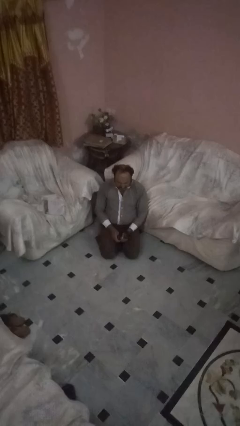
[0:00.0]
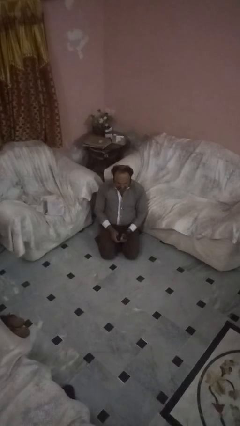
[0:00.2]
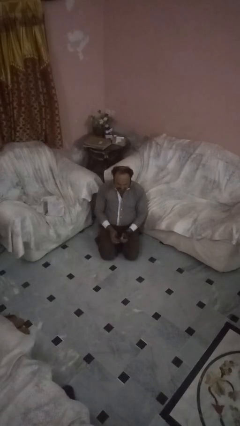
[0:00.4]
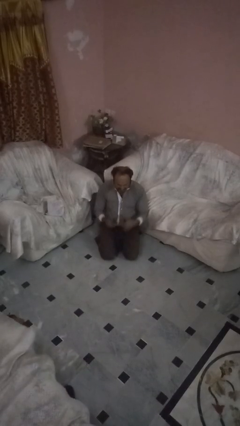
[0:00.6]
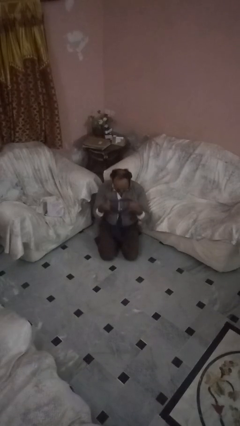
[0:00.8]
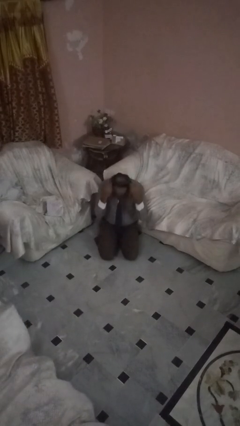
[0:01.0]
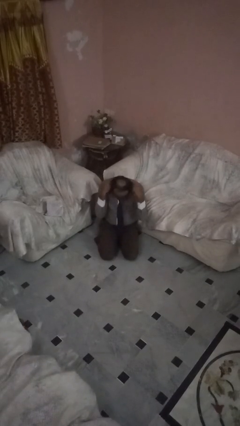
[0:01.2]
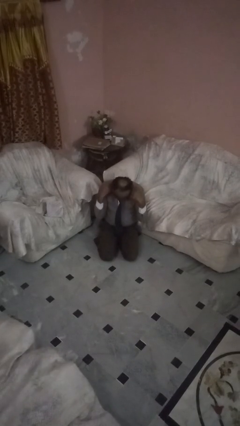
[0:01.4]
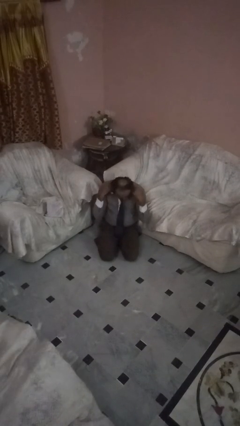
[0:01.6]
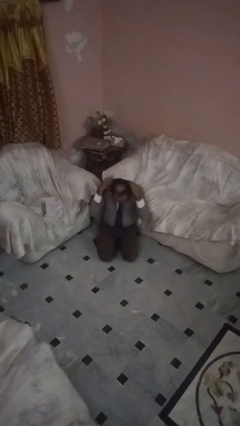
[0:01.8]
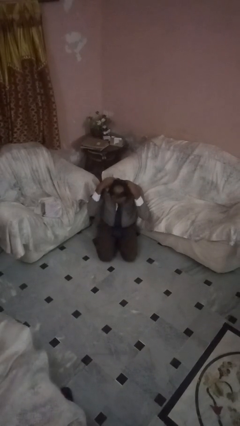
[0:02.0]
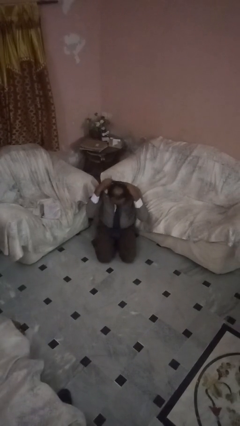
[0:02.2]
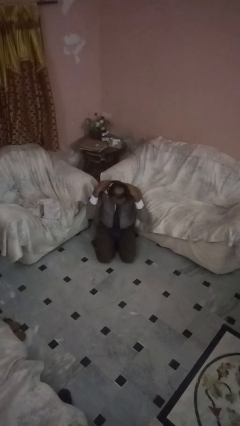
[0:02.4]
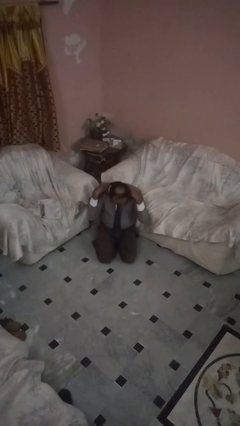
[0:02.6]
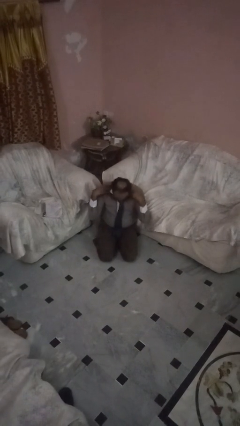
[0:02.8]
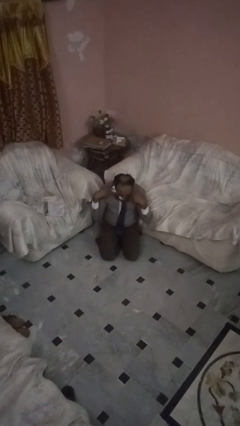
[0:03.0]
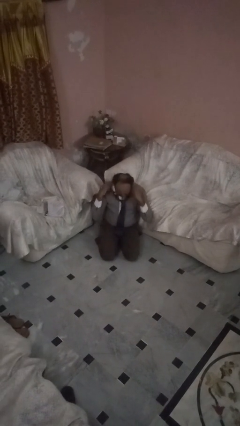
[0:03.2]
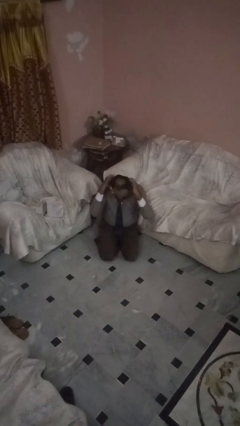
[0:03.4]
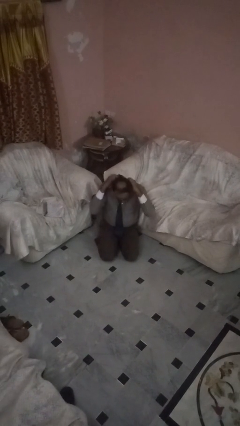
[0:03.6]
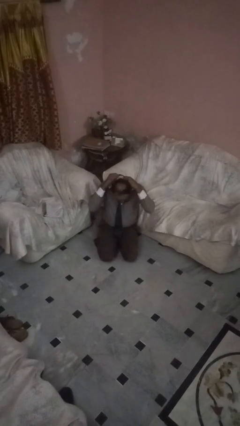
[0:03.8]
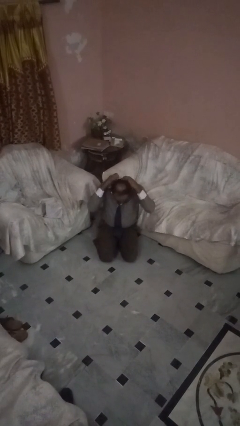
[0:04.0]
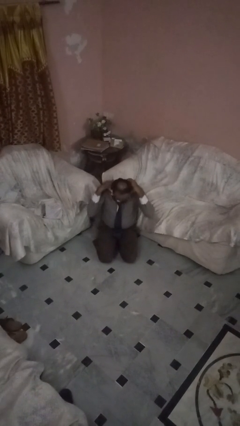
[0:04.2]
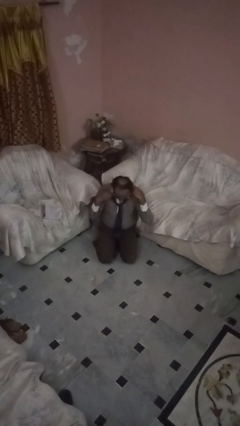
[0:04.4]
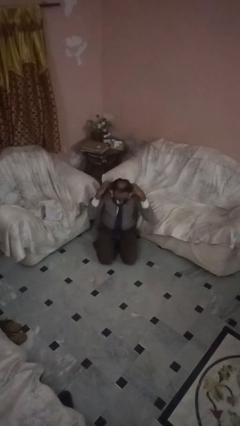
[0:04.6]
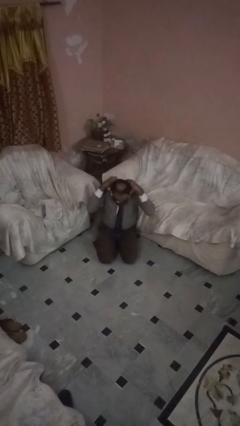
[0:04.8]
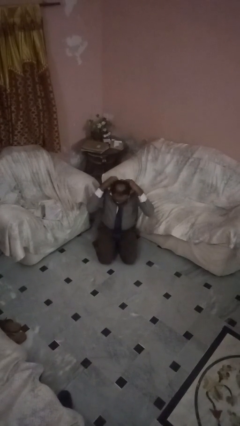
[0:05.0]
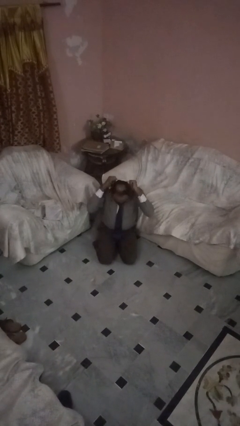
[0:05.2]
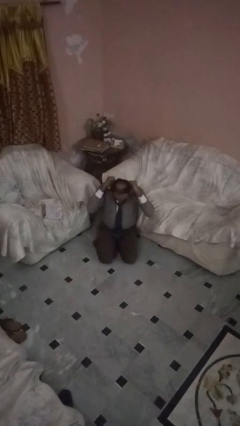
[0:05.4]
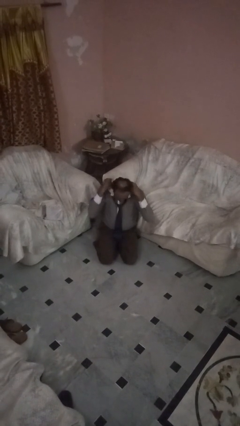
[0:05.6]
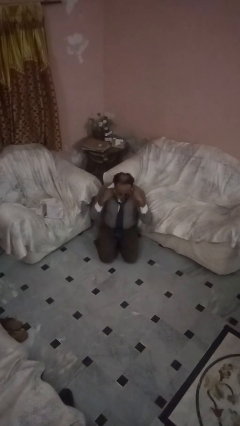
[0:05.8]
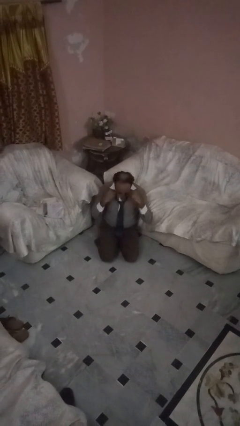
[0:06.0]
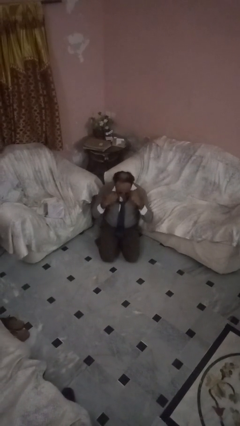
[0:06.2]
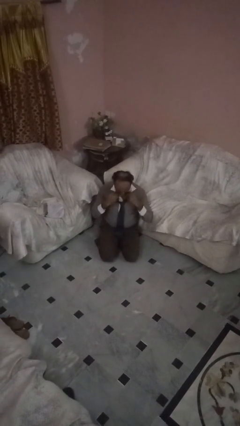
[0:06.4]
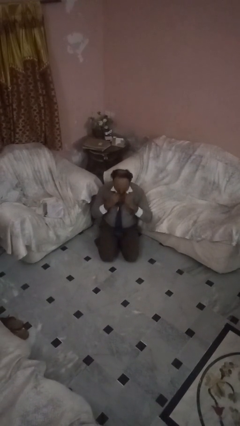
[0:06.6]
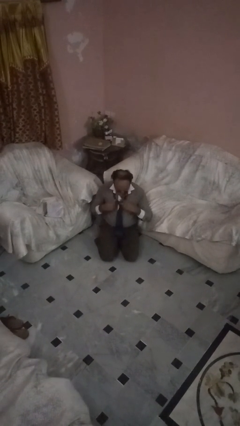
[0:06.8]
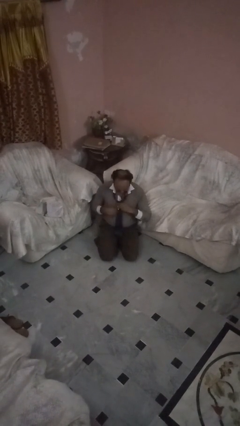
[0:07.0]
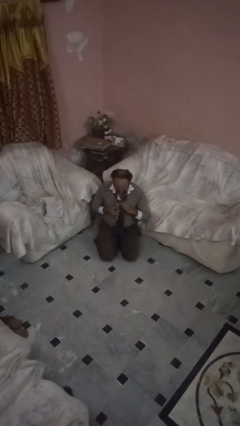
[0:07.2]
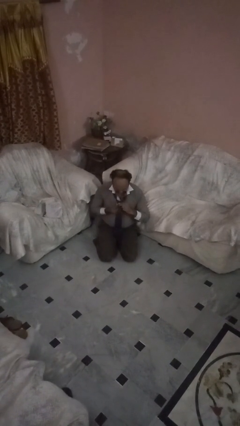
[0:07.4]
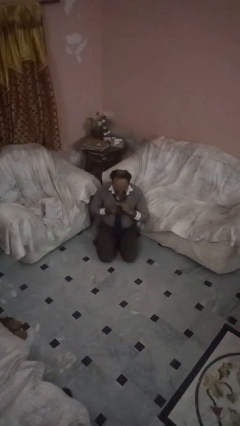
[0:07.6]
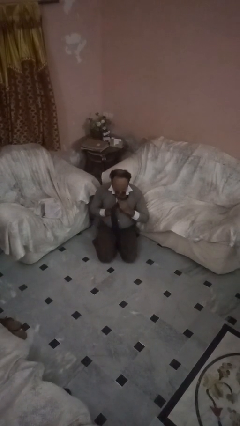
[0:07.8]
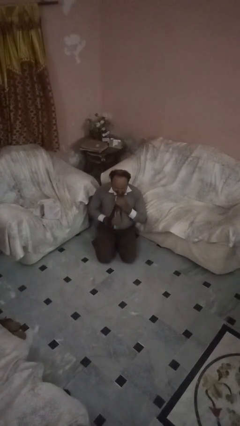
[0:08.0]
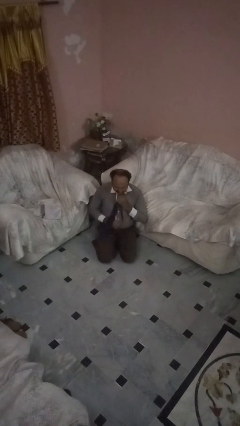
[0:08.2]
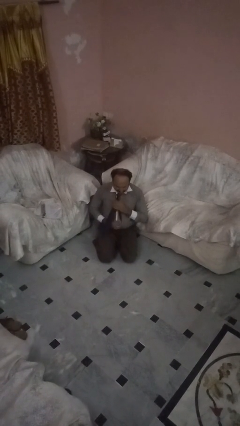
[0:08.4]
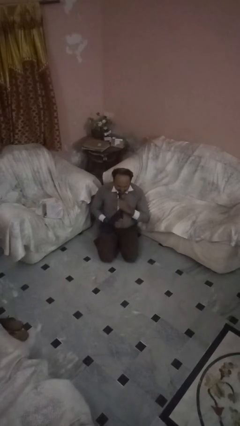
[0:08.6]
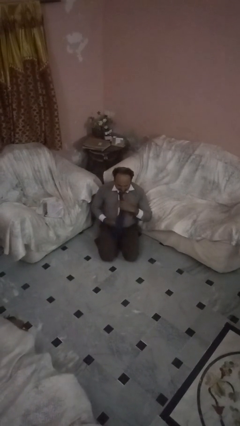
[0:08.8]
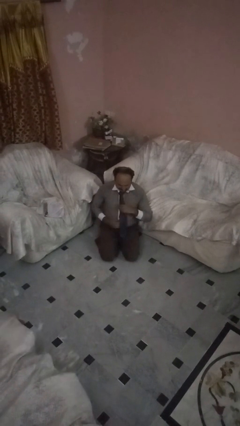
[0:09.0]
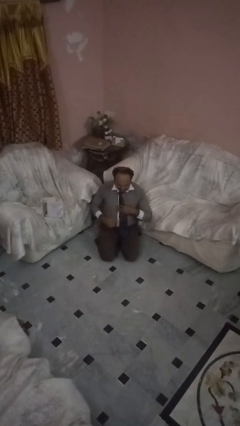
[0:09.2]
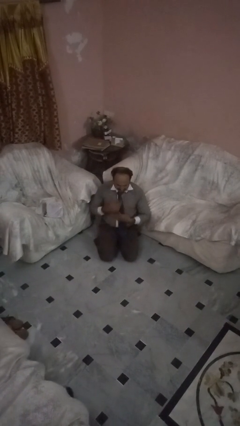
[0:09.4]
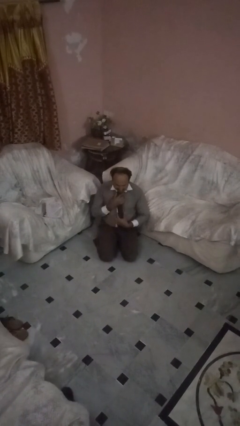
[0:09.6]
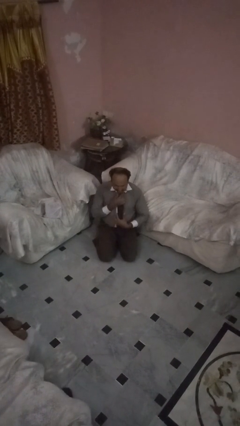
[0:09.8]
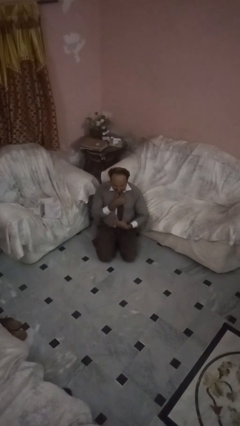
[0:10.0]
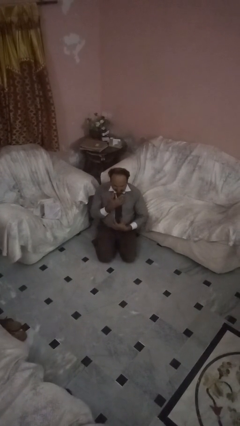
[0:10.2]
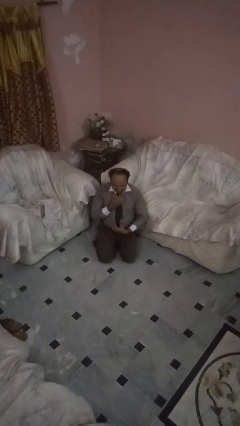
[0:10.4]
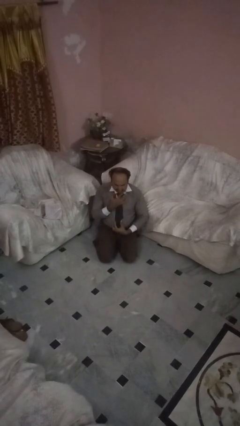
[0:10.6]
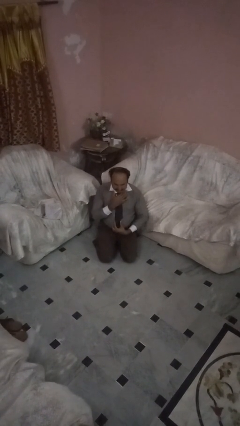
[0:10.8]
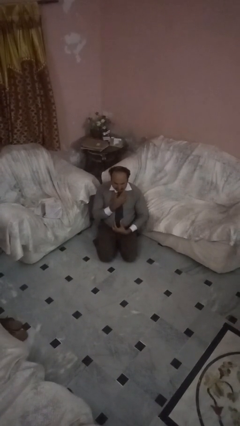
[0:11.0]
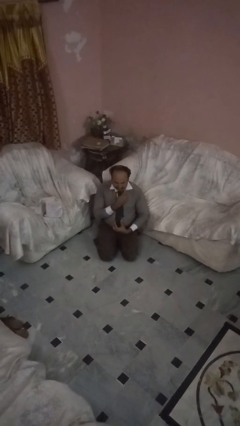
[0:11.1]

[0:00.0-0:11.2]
person puts on necktie

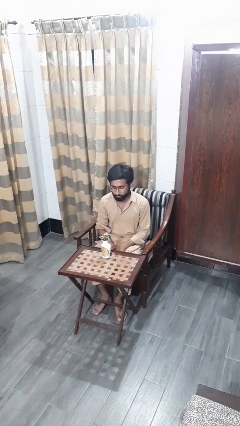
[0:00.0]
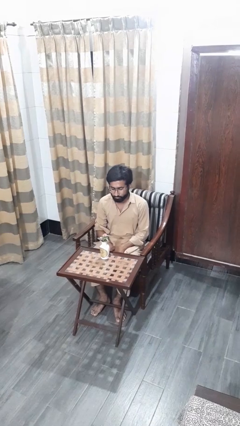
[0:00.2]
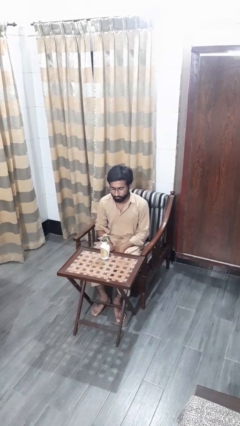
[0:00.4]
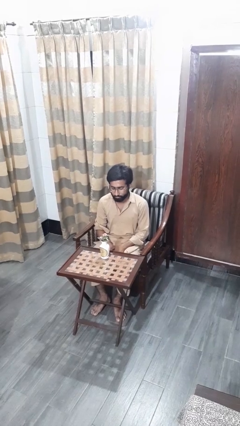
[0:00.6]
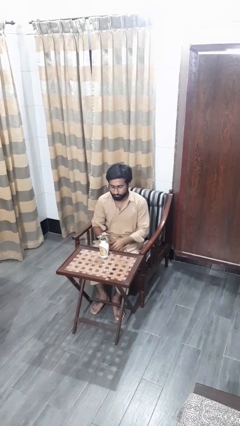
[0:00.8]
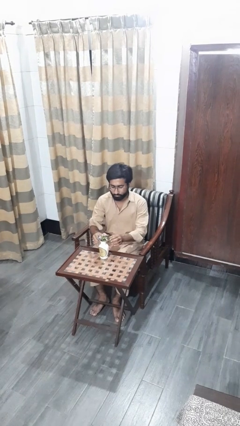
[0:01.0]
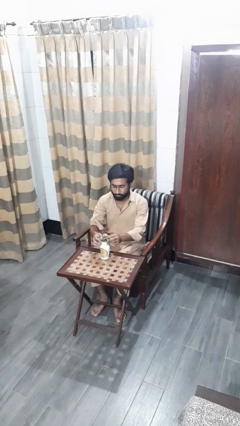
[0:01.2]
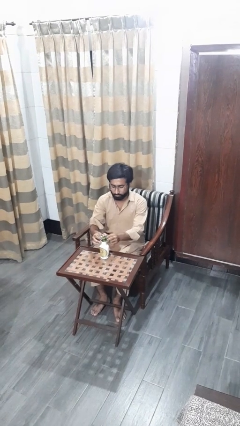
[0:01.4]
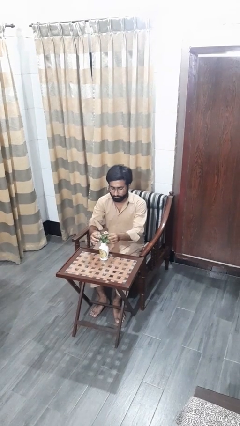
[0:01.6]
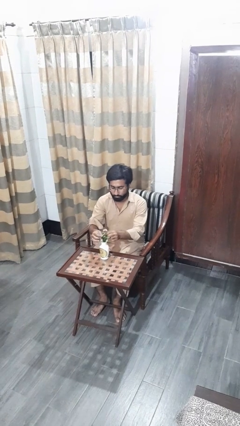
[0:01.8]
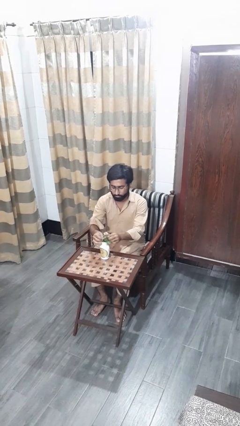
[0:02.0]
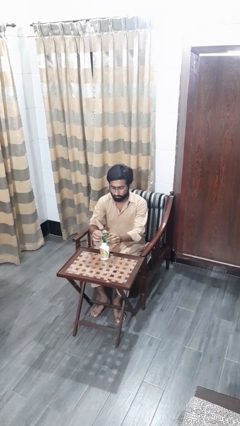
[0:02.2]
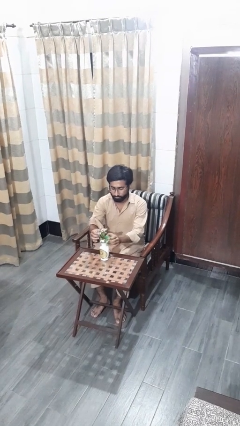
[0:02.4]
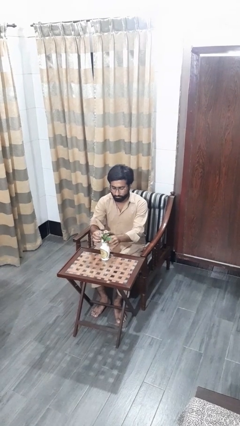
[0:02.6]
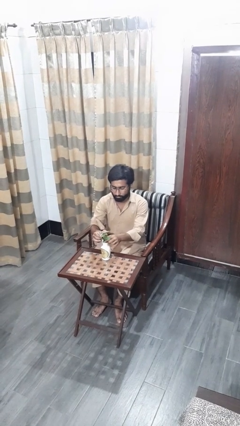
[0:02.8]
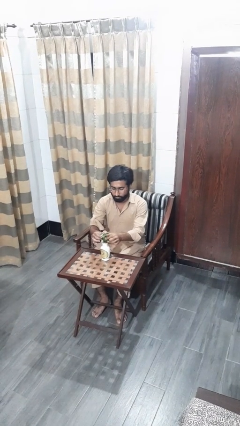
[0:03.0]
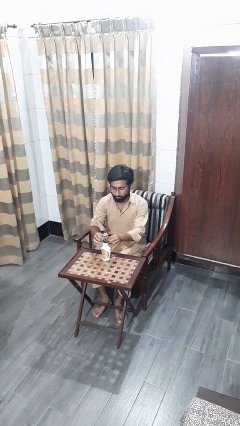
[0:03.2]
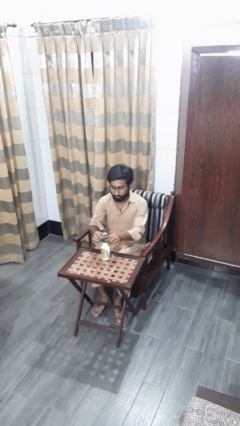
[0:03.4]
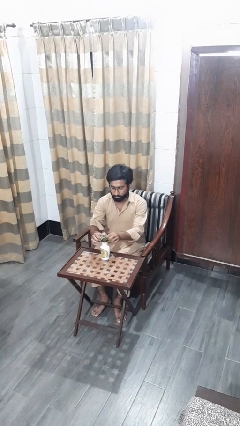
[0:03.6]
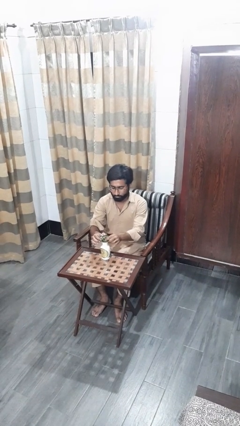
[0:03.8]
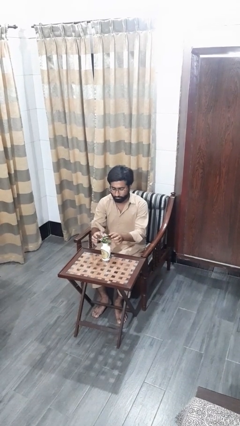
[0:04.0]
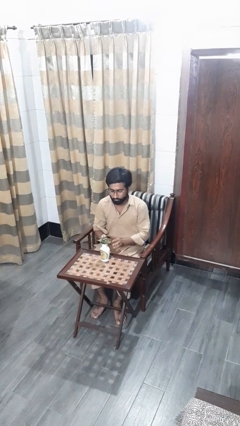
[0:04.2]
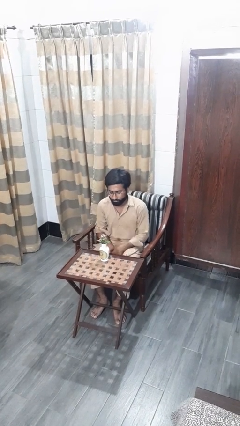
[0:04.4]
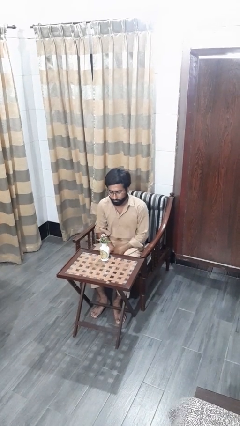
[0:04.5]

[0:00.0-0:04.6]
person arranges flowers in vase

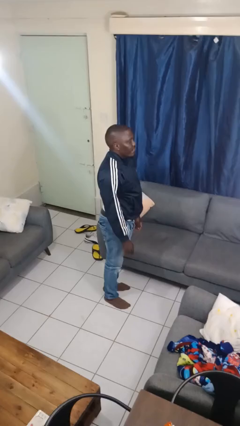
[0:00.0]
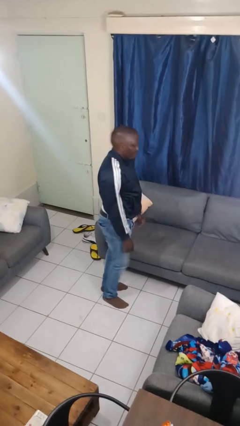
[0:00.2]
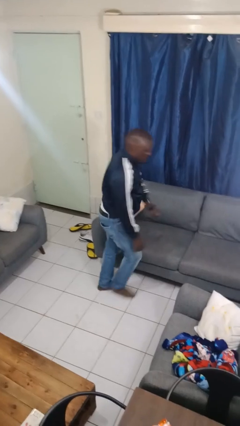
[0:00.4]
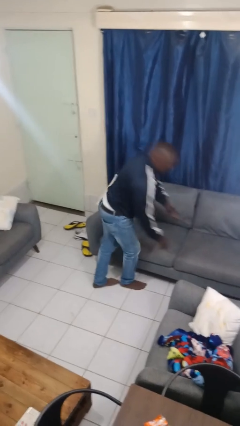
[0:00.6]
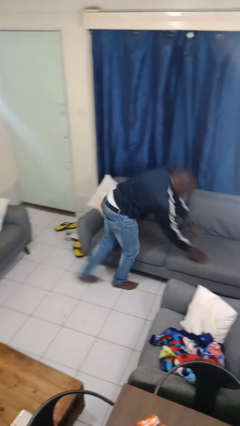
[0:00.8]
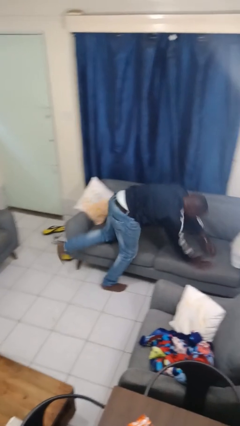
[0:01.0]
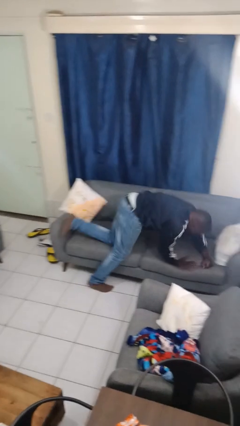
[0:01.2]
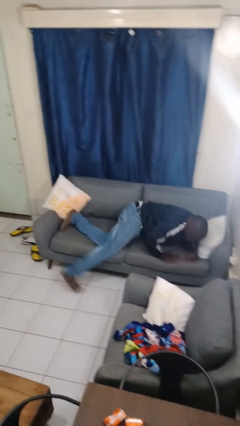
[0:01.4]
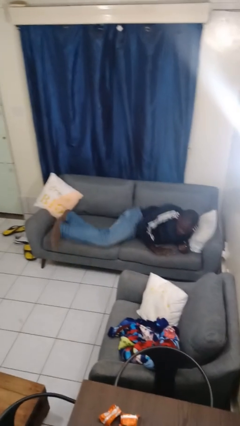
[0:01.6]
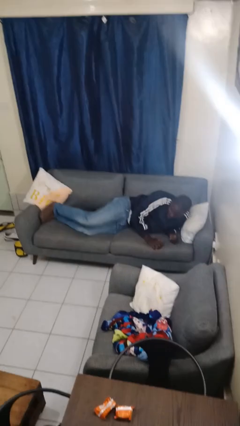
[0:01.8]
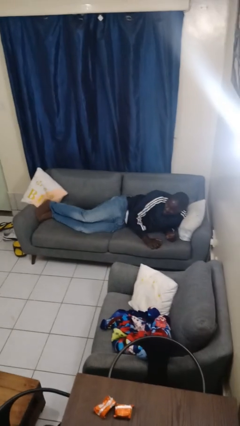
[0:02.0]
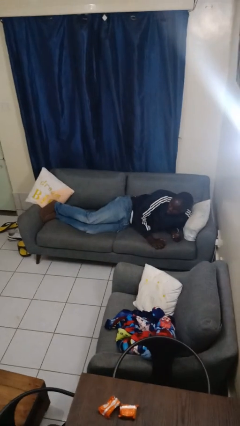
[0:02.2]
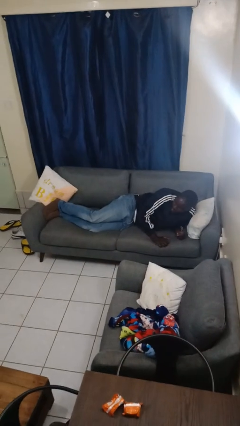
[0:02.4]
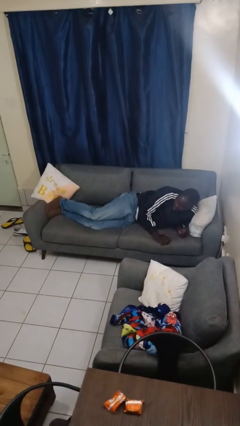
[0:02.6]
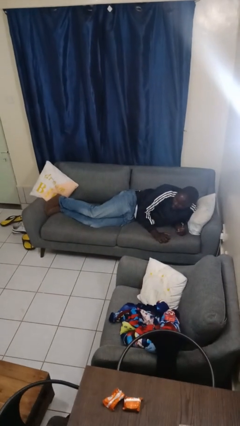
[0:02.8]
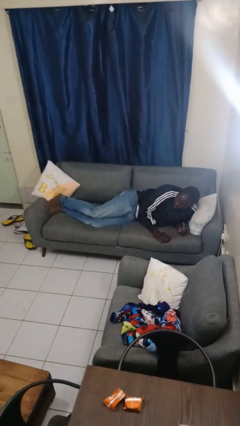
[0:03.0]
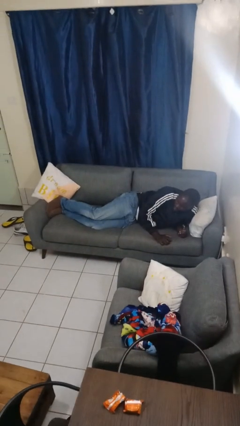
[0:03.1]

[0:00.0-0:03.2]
person lies down on couch
